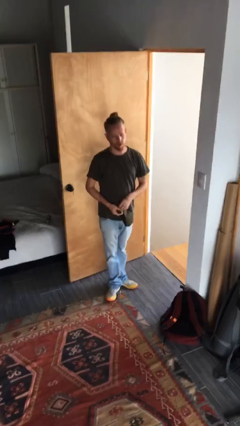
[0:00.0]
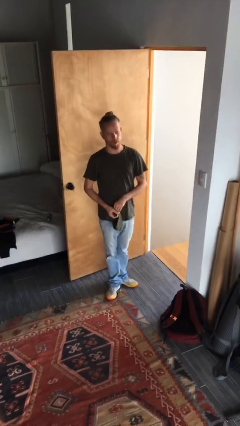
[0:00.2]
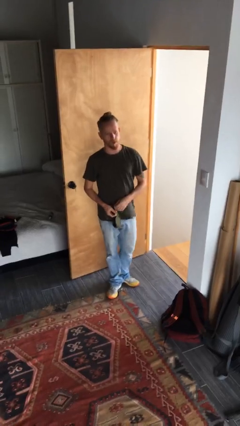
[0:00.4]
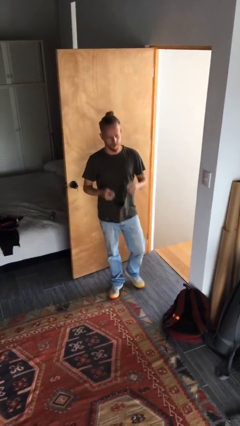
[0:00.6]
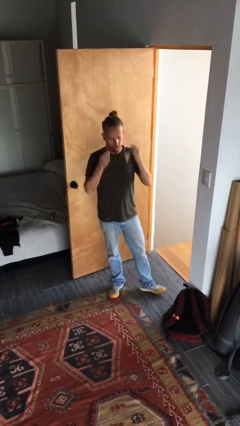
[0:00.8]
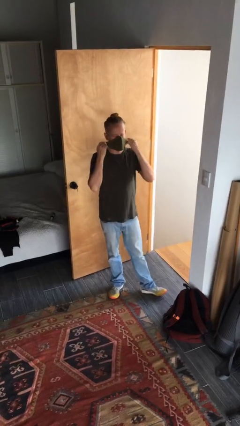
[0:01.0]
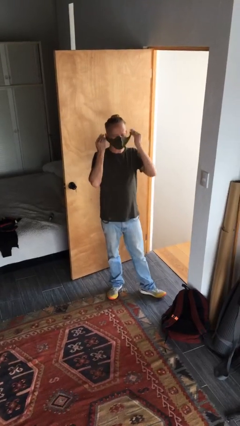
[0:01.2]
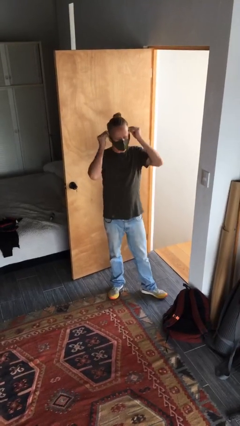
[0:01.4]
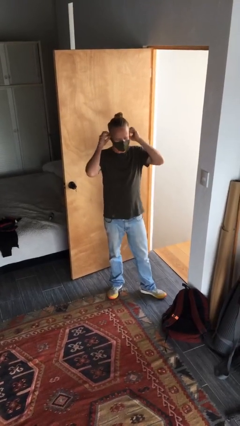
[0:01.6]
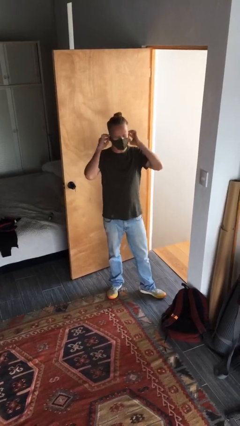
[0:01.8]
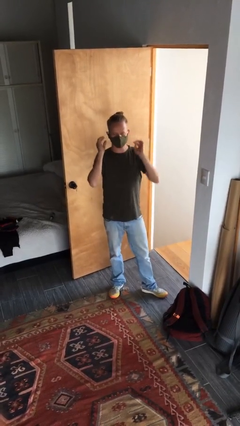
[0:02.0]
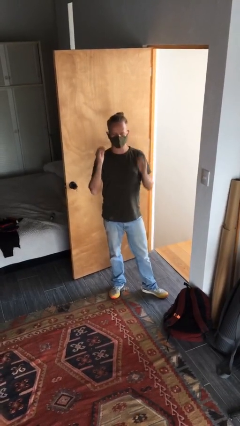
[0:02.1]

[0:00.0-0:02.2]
person puts on facemask

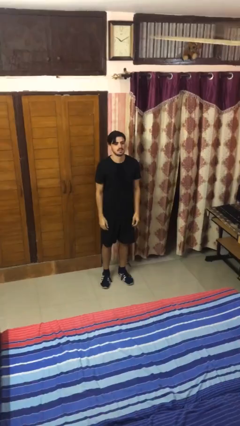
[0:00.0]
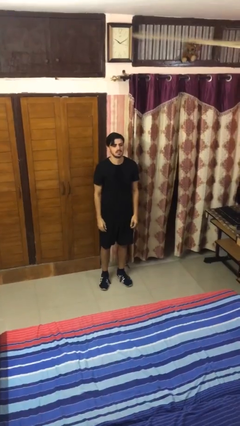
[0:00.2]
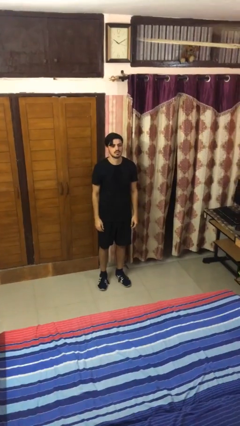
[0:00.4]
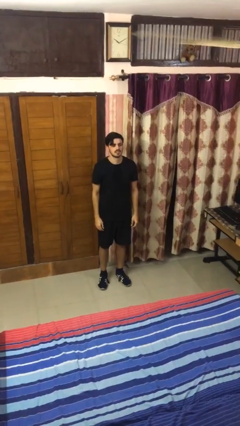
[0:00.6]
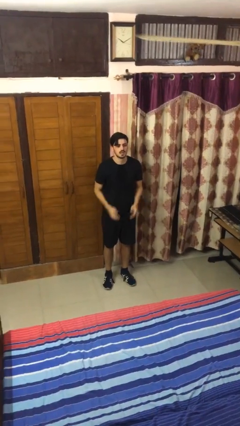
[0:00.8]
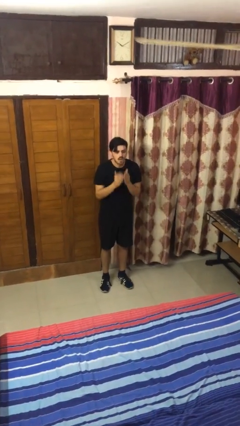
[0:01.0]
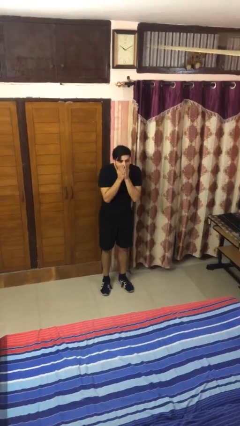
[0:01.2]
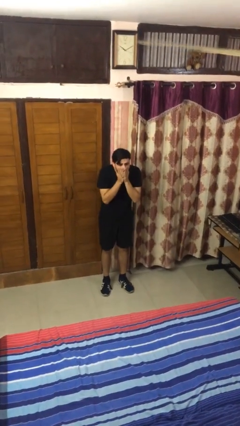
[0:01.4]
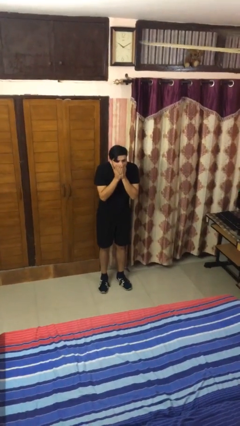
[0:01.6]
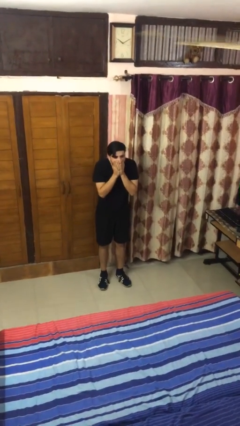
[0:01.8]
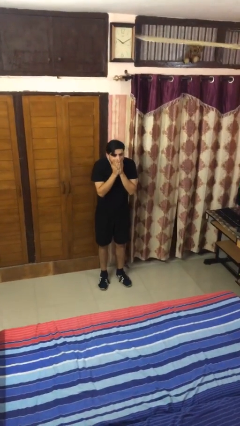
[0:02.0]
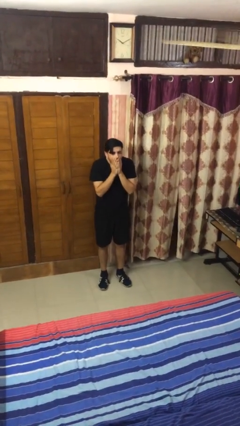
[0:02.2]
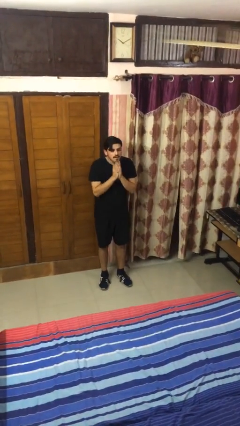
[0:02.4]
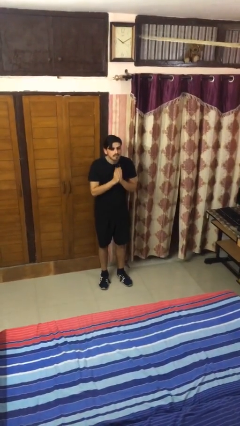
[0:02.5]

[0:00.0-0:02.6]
person covers face with hands

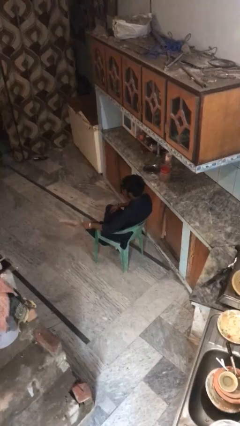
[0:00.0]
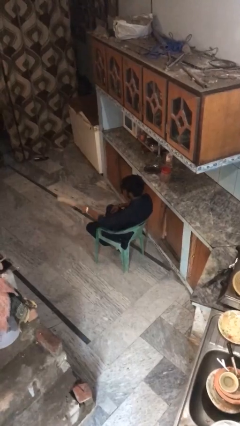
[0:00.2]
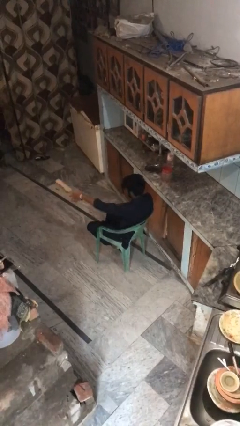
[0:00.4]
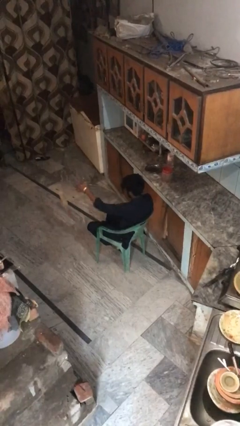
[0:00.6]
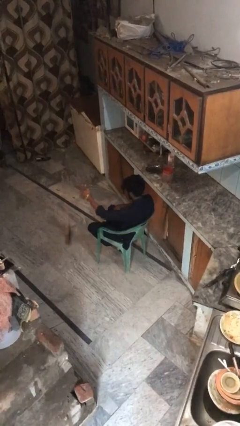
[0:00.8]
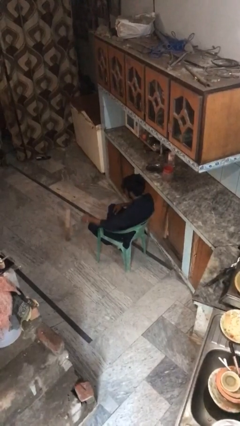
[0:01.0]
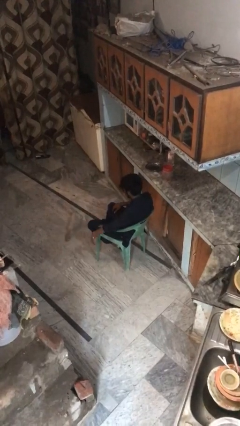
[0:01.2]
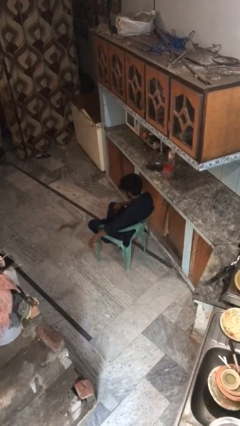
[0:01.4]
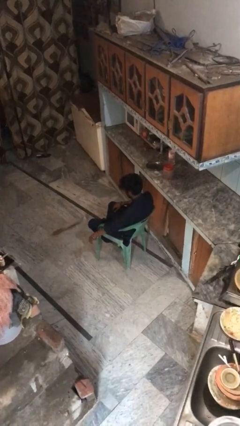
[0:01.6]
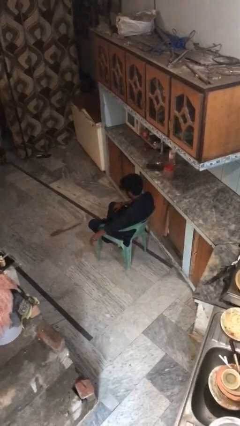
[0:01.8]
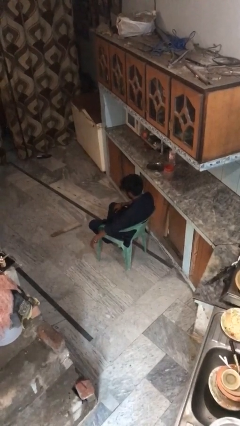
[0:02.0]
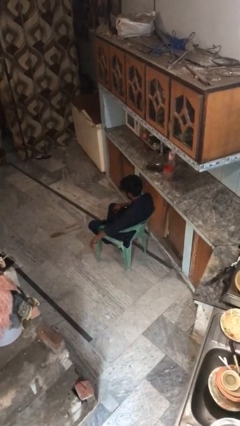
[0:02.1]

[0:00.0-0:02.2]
person throws object to ground

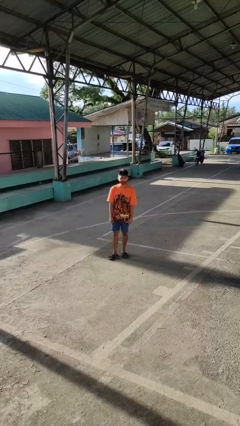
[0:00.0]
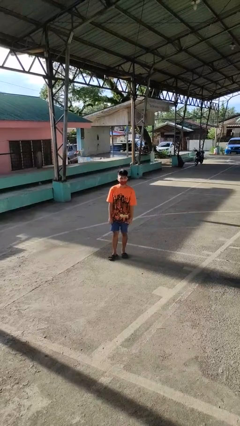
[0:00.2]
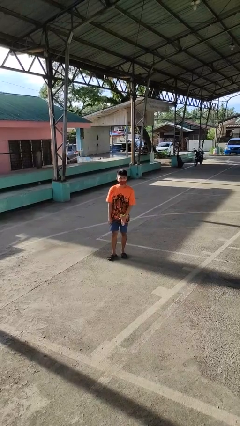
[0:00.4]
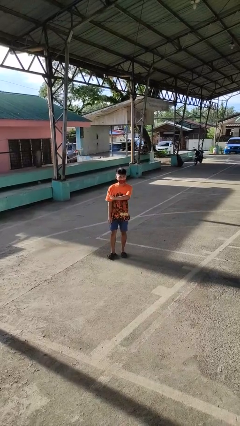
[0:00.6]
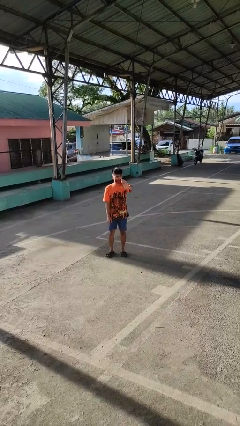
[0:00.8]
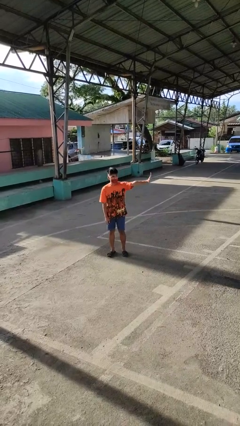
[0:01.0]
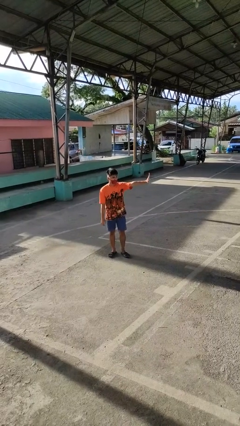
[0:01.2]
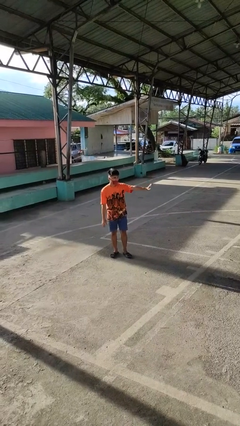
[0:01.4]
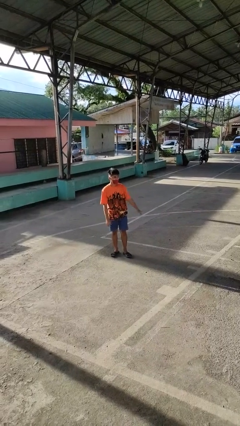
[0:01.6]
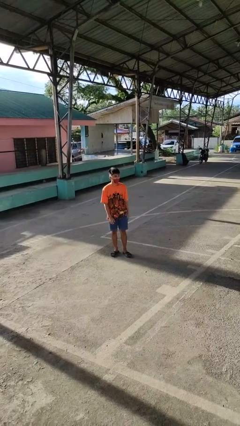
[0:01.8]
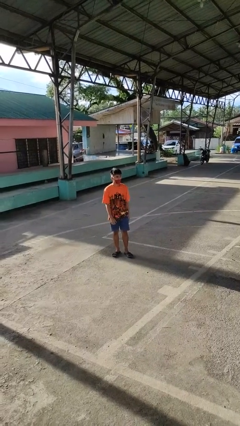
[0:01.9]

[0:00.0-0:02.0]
person gestures swipe left

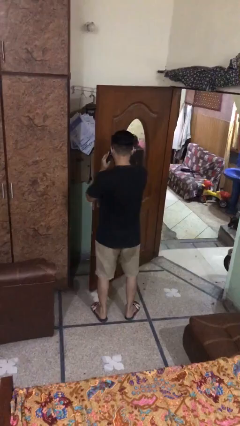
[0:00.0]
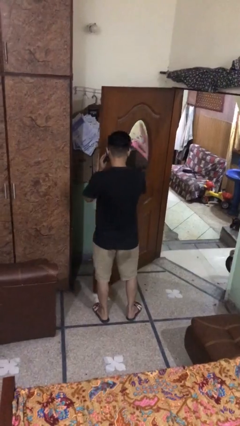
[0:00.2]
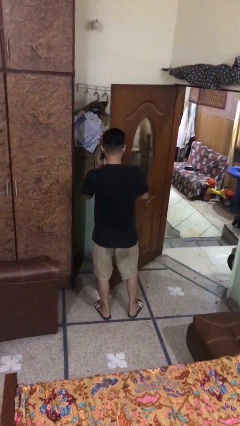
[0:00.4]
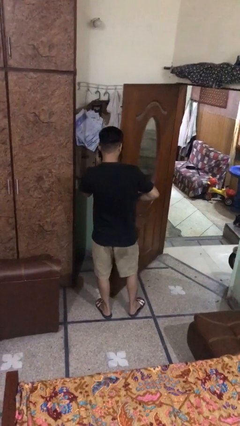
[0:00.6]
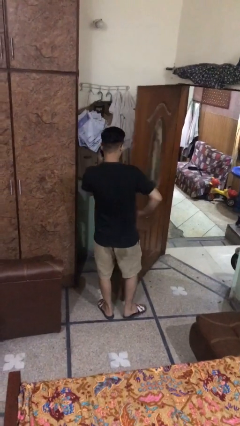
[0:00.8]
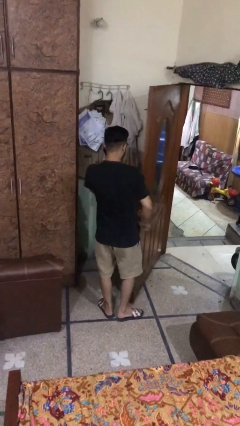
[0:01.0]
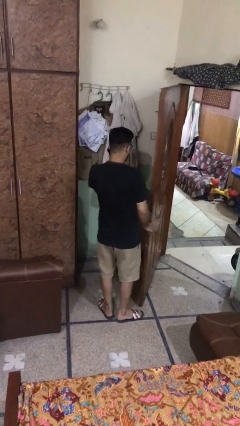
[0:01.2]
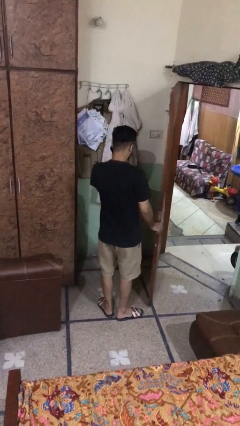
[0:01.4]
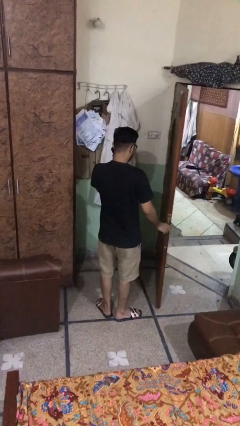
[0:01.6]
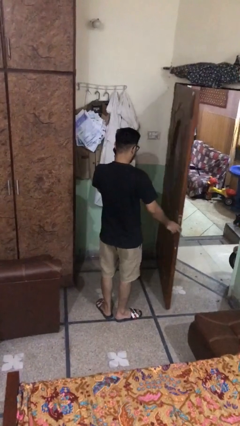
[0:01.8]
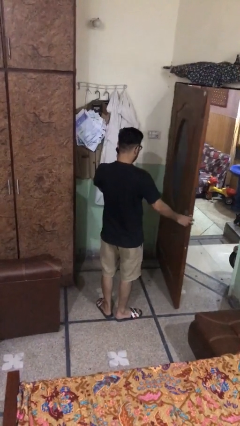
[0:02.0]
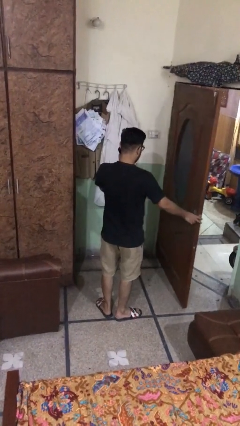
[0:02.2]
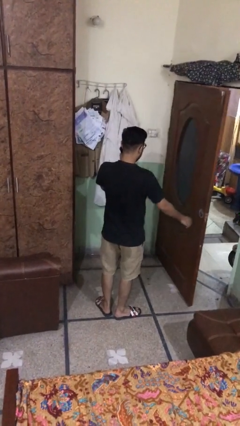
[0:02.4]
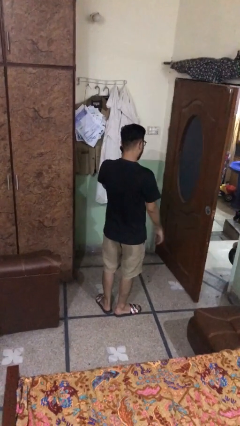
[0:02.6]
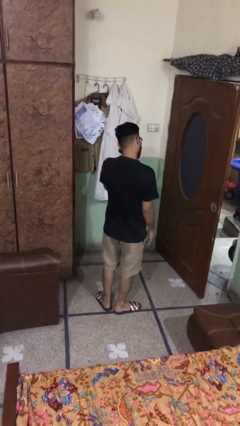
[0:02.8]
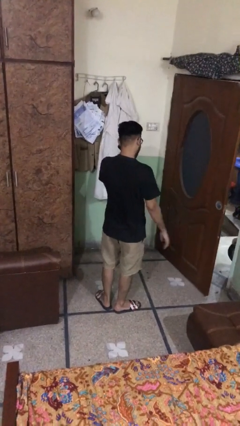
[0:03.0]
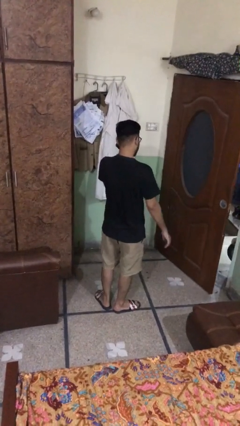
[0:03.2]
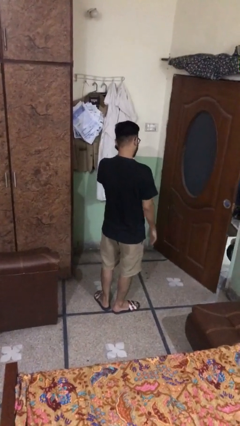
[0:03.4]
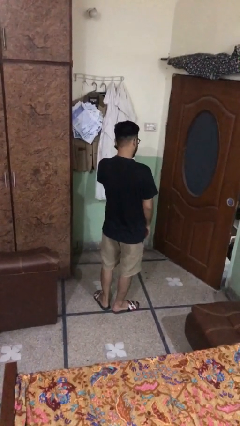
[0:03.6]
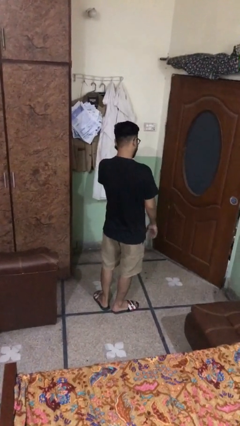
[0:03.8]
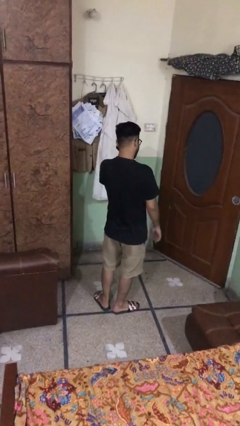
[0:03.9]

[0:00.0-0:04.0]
person closes facility door

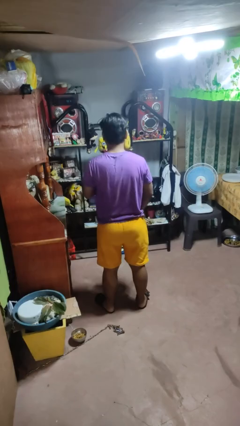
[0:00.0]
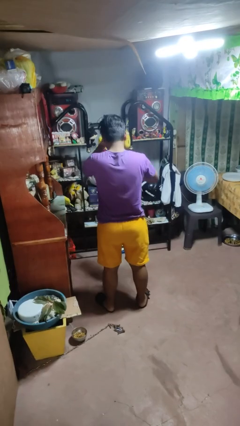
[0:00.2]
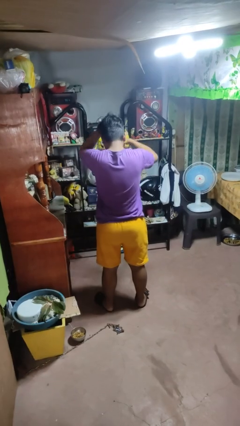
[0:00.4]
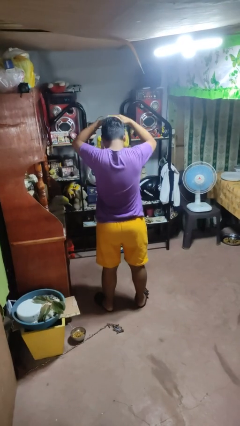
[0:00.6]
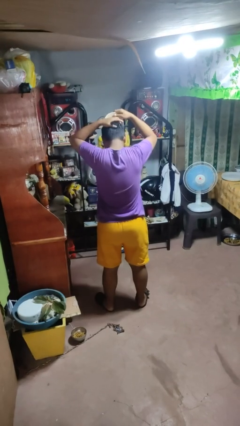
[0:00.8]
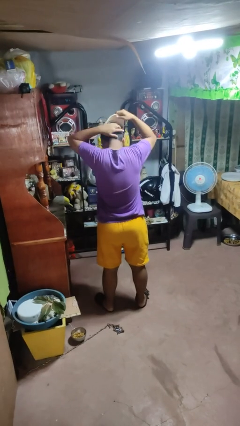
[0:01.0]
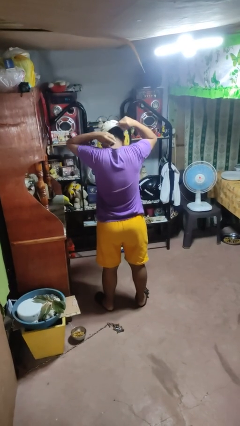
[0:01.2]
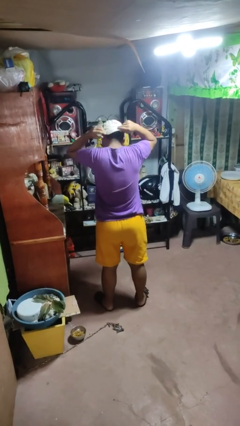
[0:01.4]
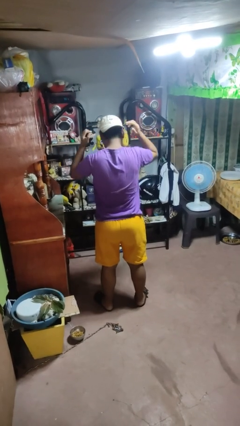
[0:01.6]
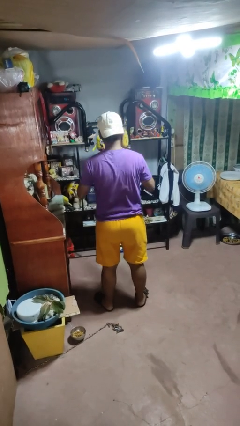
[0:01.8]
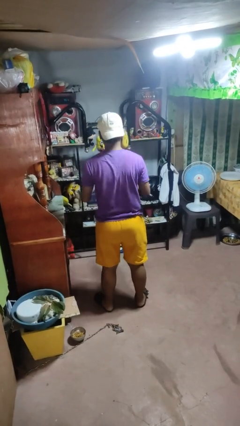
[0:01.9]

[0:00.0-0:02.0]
person puts on hat

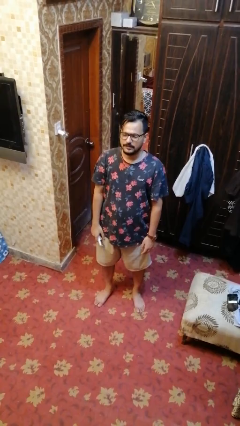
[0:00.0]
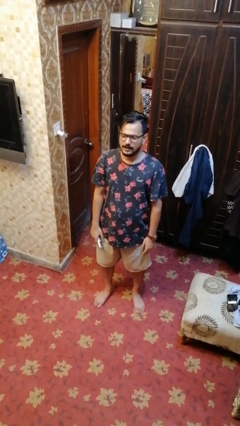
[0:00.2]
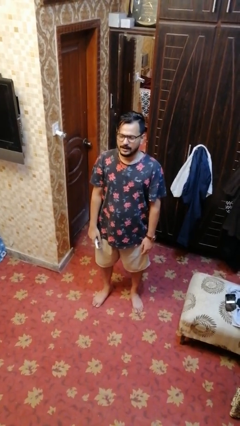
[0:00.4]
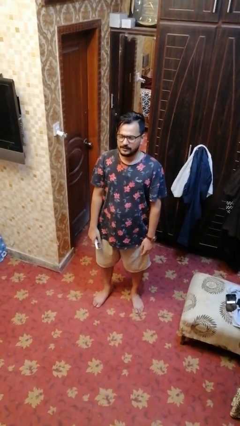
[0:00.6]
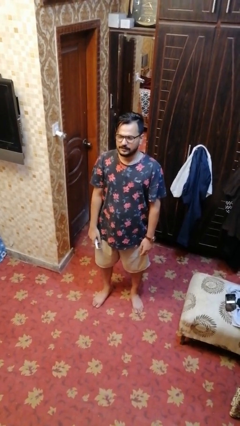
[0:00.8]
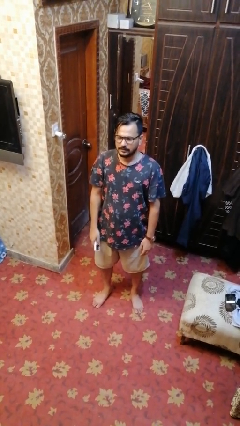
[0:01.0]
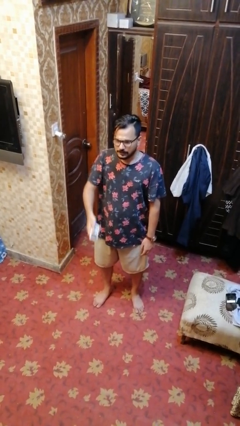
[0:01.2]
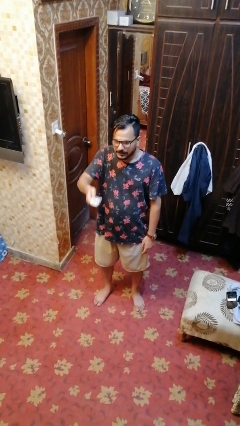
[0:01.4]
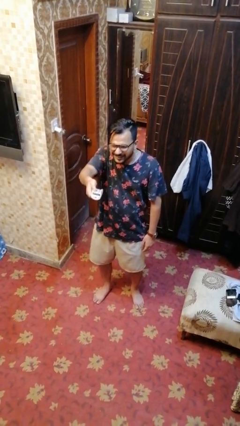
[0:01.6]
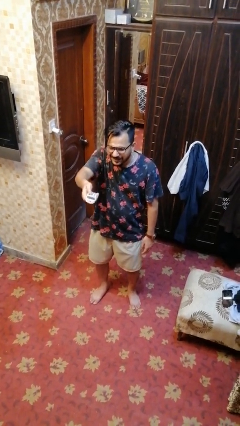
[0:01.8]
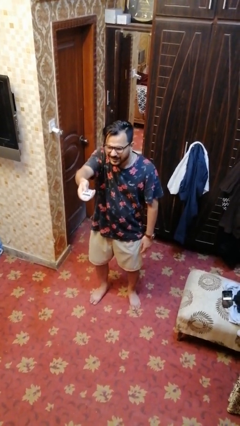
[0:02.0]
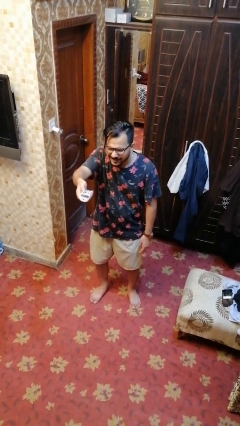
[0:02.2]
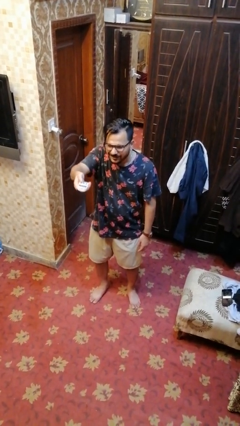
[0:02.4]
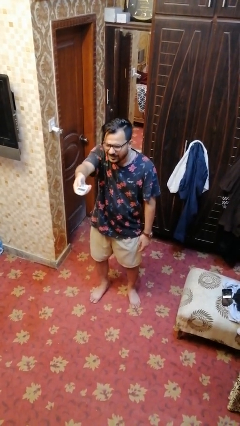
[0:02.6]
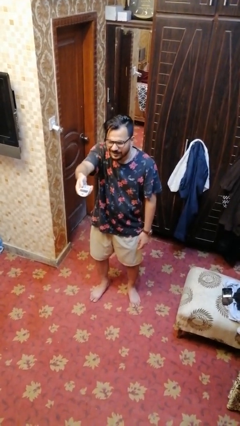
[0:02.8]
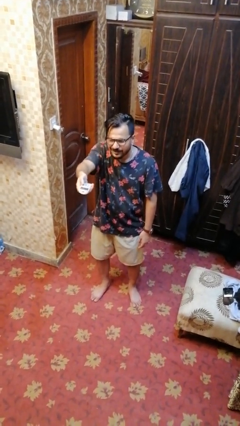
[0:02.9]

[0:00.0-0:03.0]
person uses television remote
